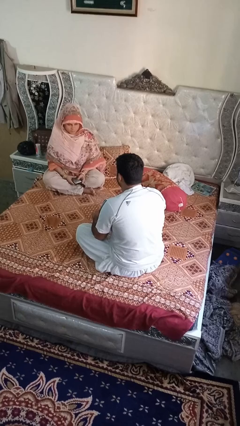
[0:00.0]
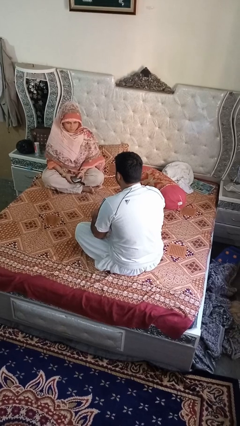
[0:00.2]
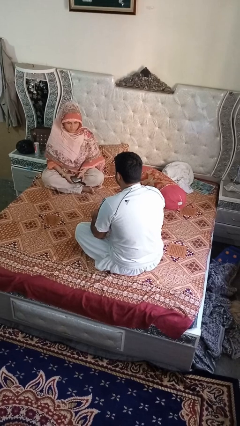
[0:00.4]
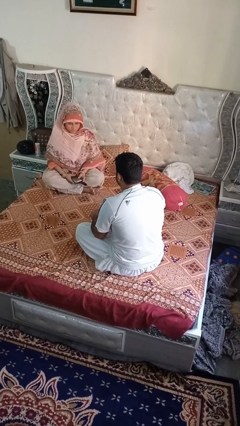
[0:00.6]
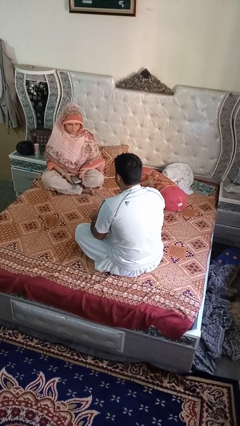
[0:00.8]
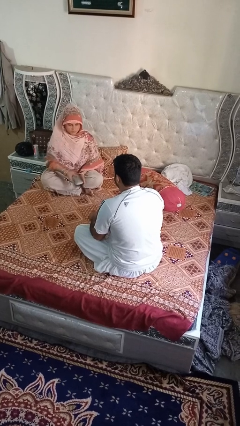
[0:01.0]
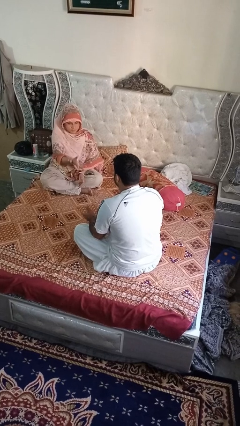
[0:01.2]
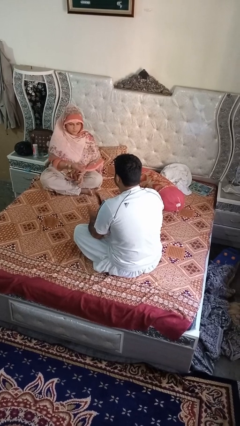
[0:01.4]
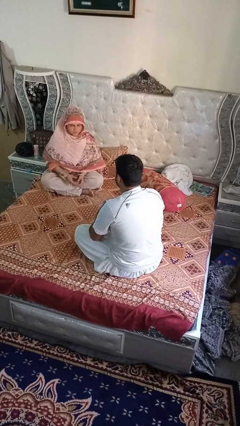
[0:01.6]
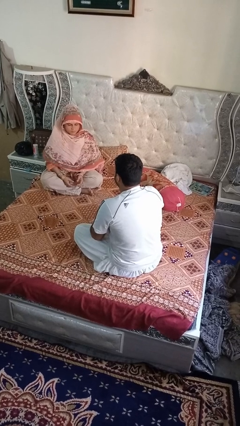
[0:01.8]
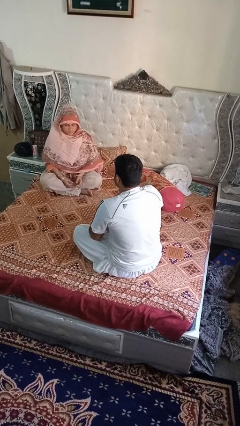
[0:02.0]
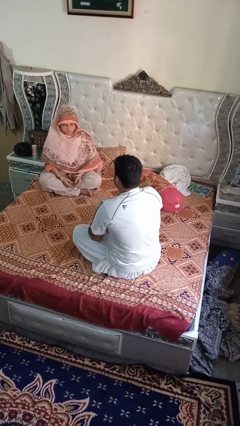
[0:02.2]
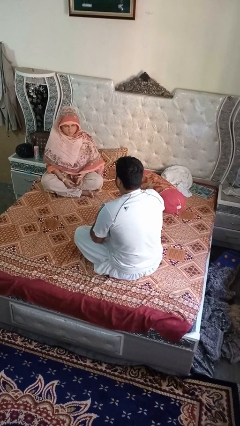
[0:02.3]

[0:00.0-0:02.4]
person catches object from person

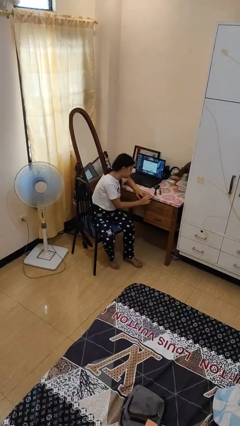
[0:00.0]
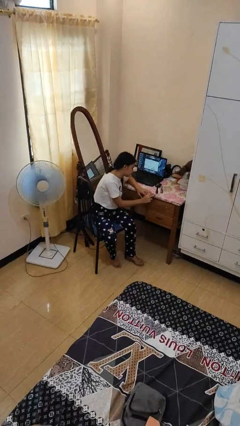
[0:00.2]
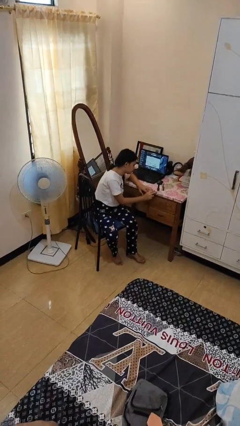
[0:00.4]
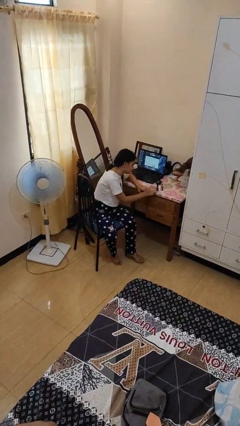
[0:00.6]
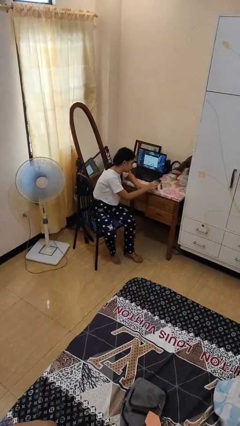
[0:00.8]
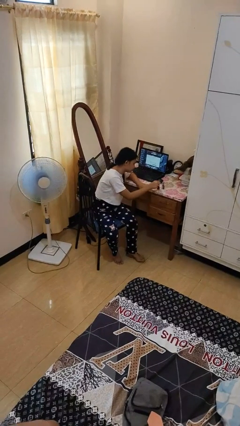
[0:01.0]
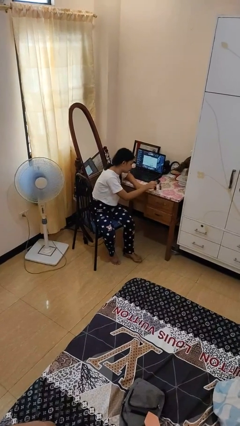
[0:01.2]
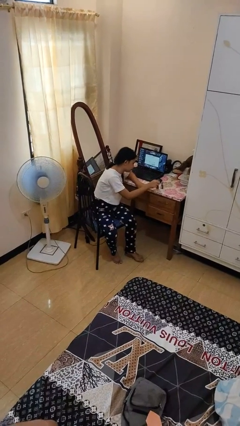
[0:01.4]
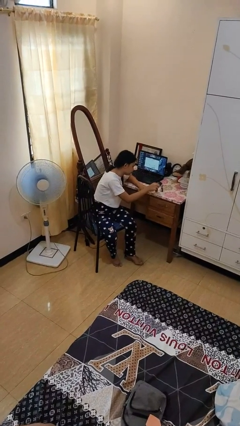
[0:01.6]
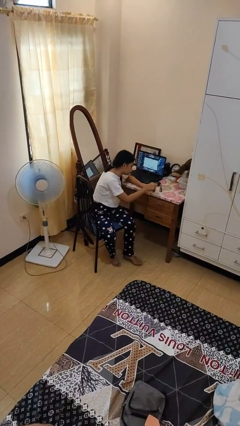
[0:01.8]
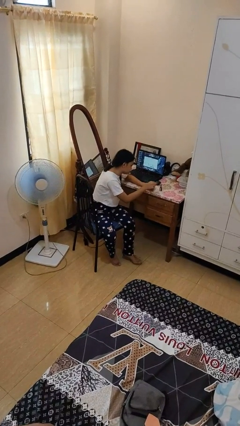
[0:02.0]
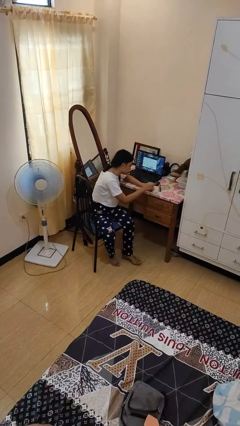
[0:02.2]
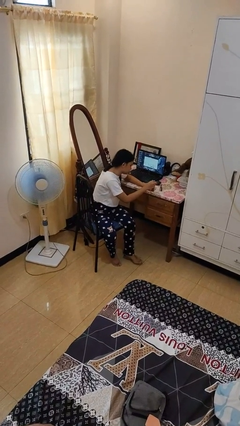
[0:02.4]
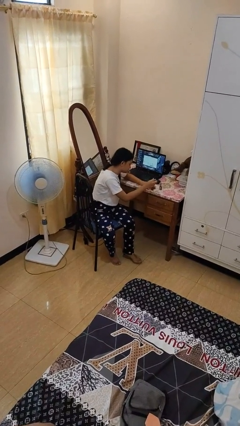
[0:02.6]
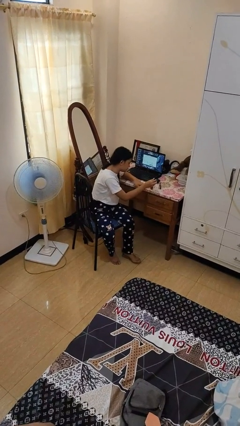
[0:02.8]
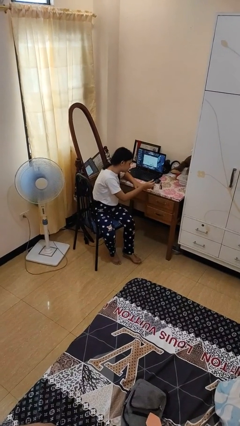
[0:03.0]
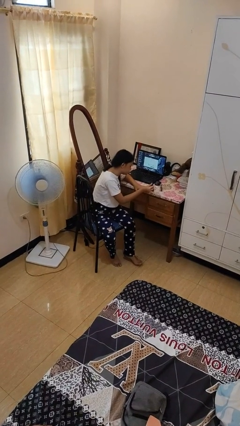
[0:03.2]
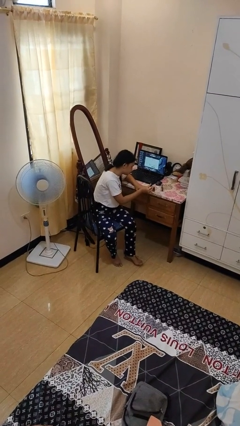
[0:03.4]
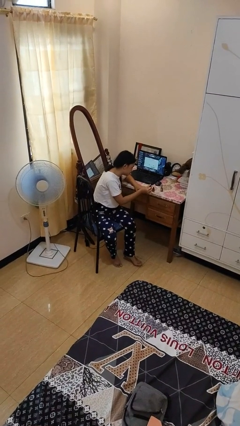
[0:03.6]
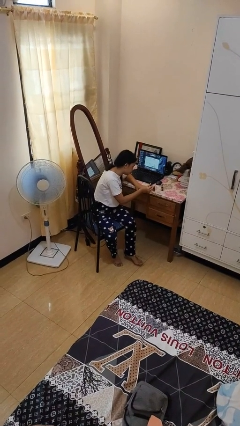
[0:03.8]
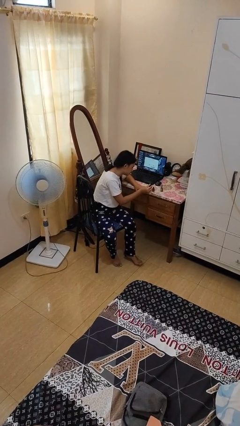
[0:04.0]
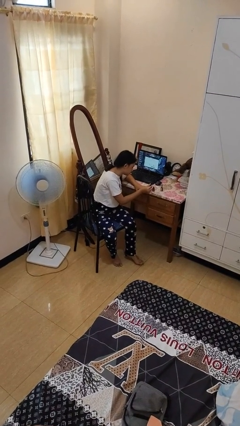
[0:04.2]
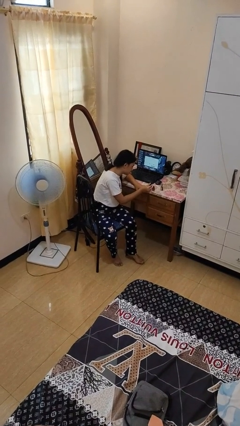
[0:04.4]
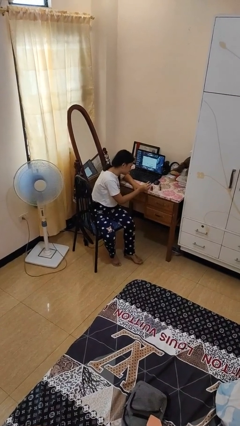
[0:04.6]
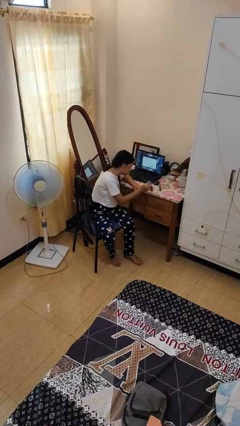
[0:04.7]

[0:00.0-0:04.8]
person paints fingernails

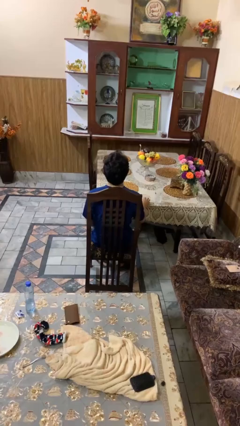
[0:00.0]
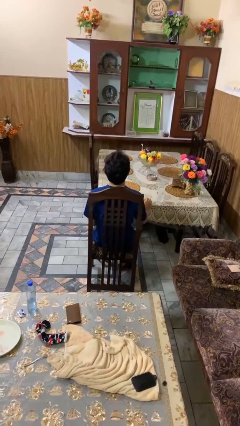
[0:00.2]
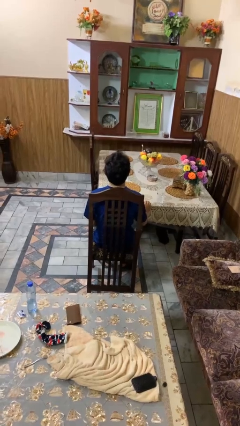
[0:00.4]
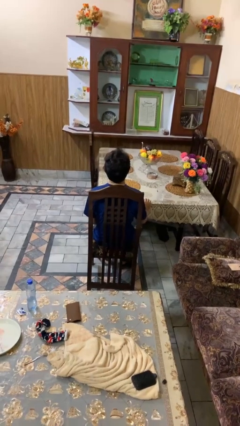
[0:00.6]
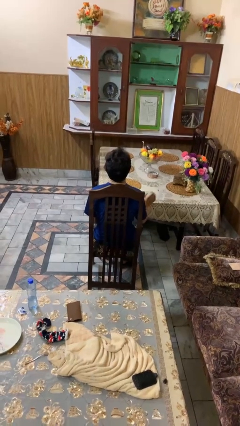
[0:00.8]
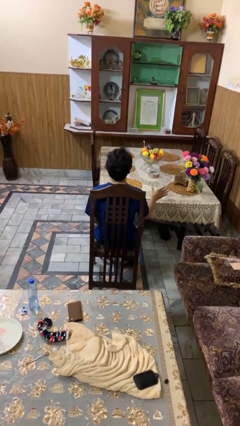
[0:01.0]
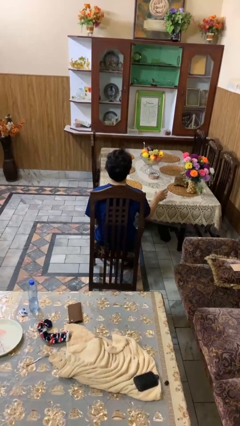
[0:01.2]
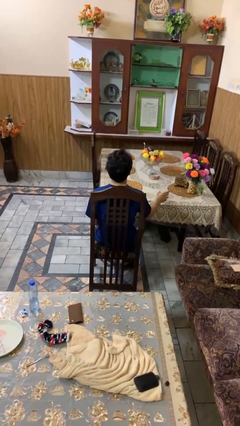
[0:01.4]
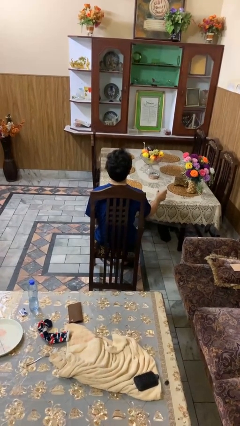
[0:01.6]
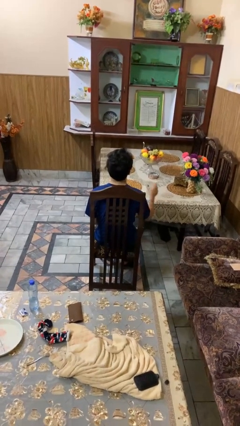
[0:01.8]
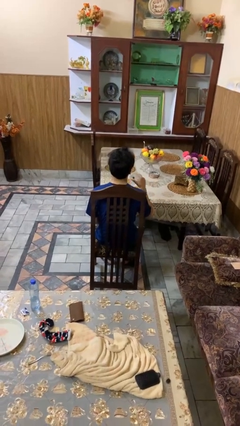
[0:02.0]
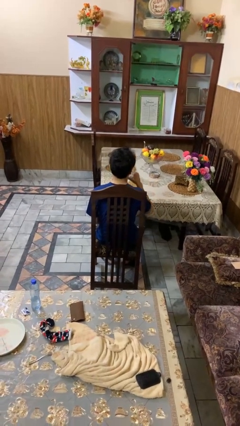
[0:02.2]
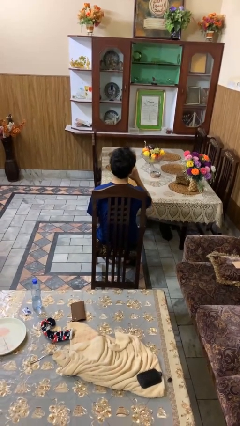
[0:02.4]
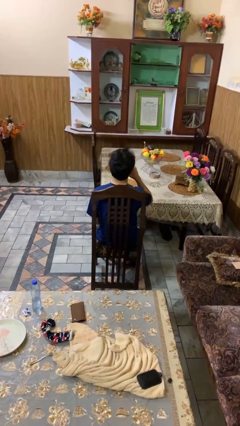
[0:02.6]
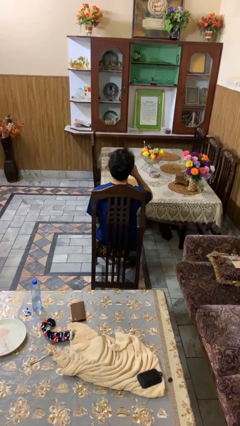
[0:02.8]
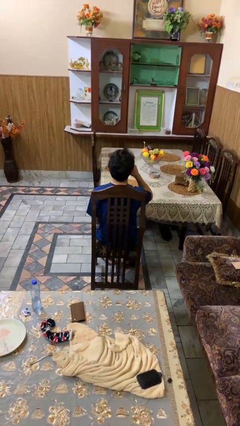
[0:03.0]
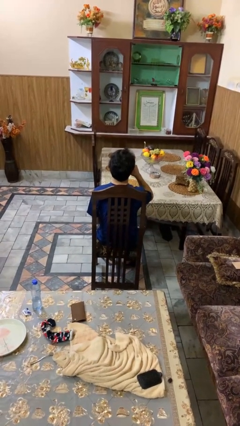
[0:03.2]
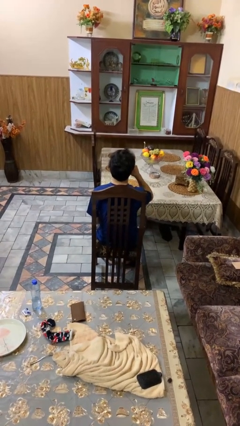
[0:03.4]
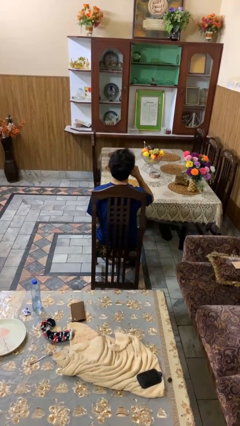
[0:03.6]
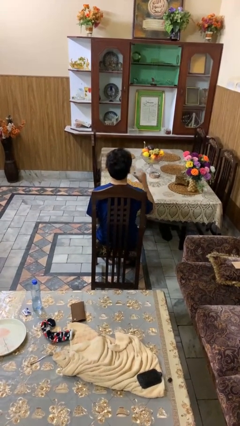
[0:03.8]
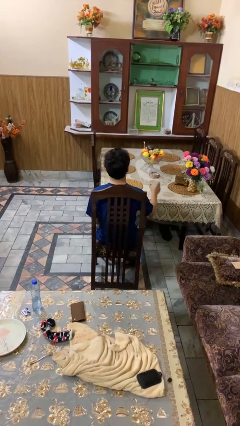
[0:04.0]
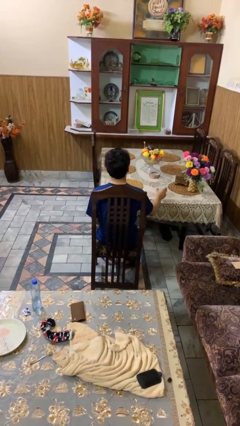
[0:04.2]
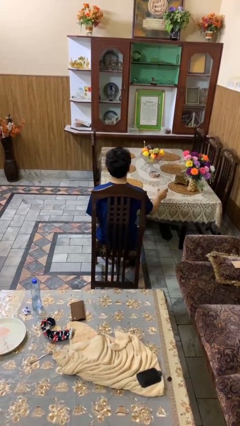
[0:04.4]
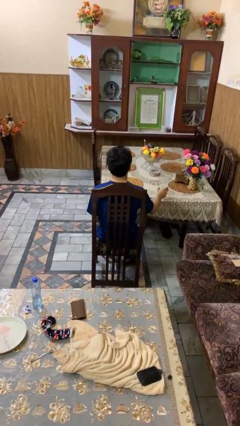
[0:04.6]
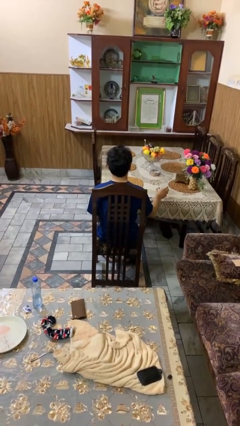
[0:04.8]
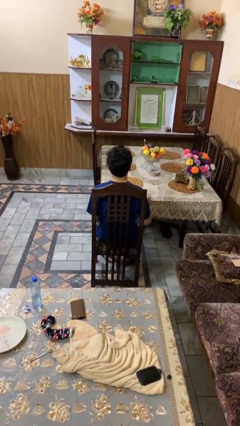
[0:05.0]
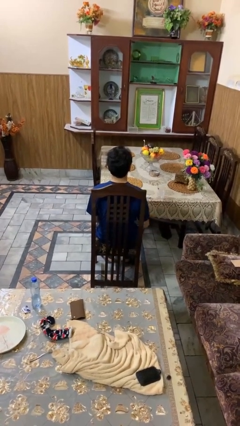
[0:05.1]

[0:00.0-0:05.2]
person drinks from cup

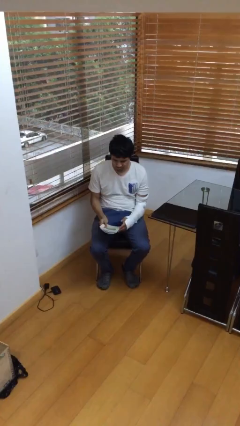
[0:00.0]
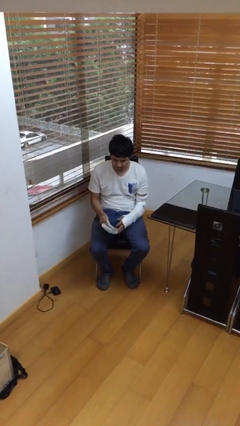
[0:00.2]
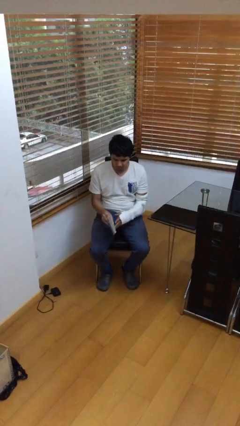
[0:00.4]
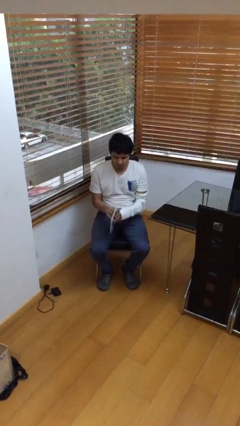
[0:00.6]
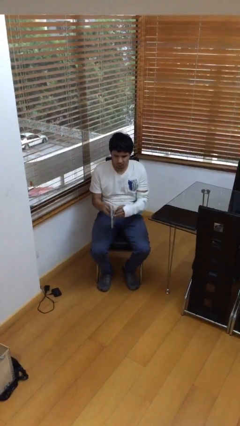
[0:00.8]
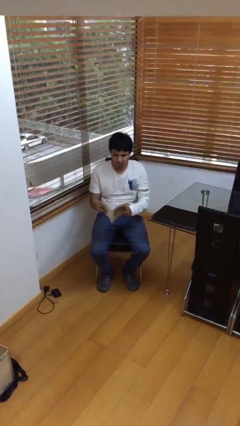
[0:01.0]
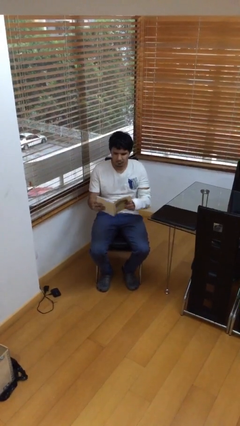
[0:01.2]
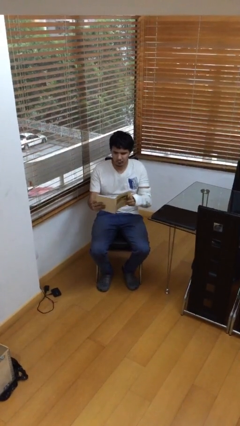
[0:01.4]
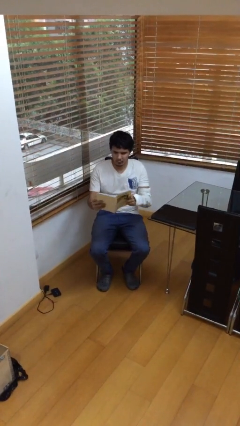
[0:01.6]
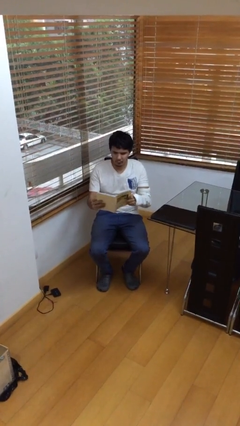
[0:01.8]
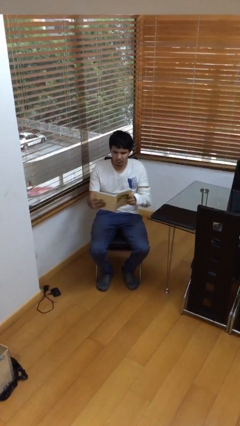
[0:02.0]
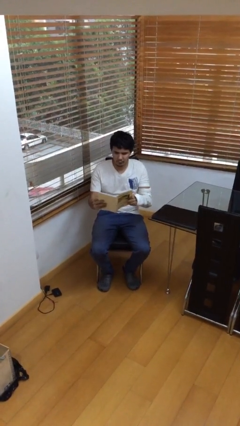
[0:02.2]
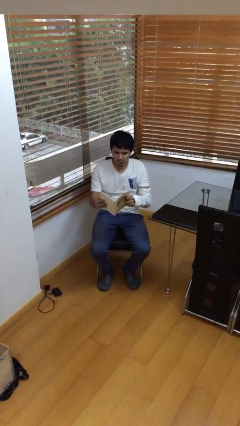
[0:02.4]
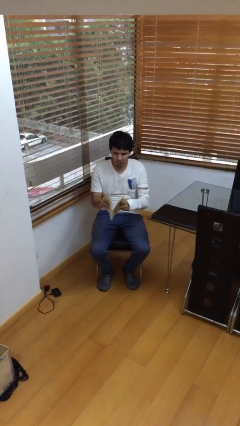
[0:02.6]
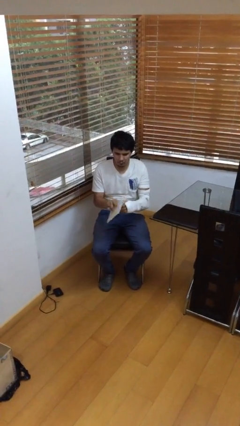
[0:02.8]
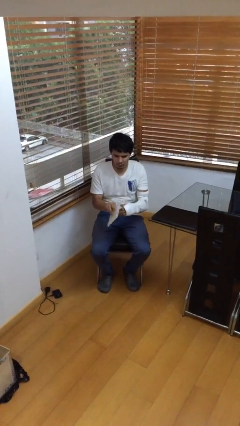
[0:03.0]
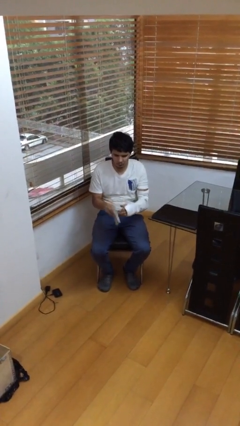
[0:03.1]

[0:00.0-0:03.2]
person reads document

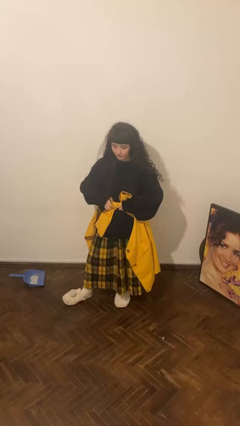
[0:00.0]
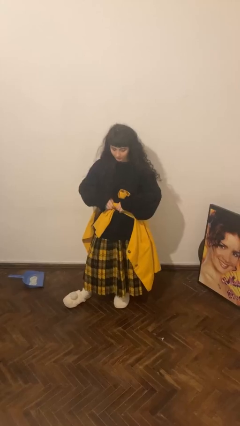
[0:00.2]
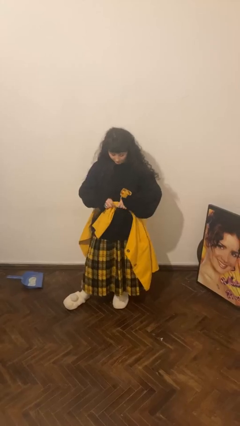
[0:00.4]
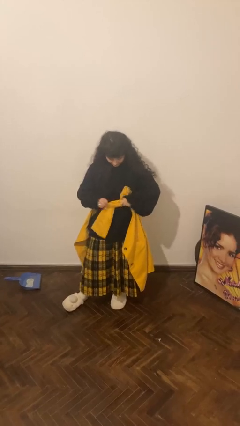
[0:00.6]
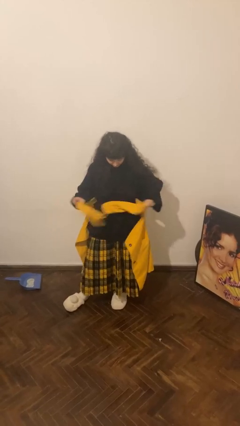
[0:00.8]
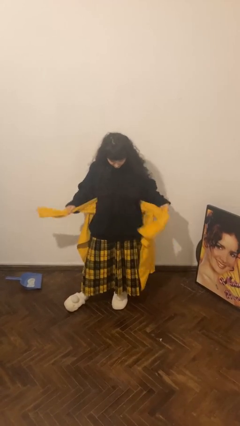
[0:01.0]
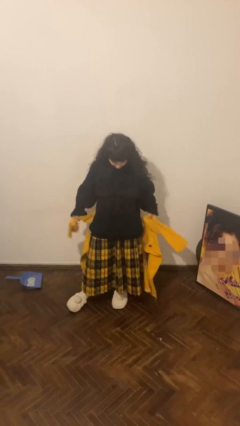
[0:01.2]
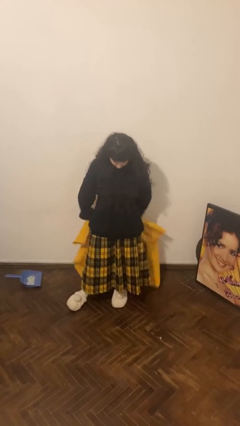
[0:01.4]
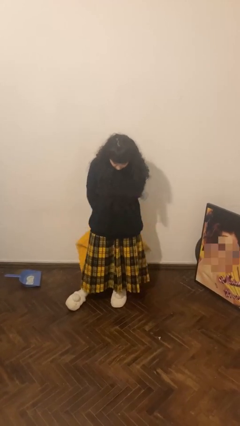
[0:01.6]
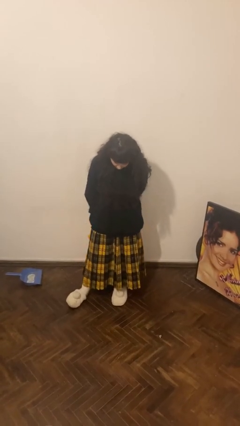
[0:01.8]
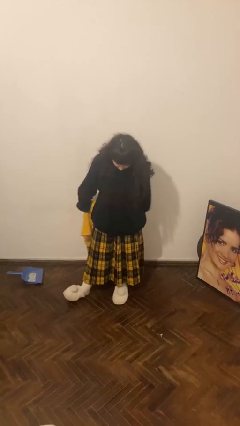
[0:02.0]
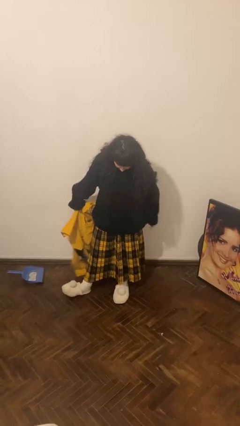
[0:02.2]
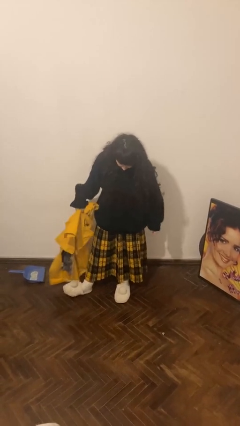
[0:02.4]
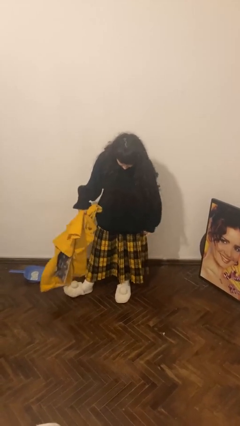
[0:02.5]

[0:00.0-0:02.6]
person unties jacket around waist
